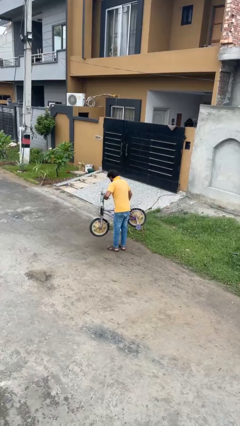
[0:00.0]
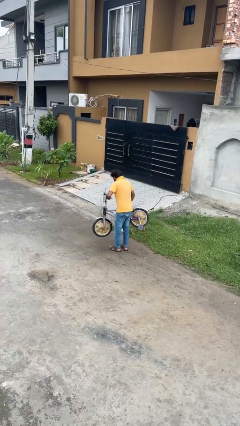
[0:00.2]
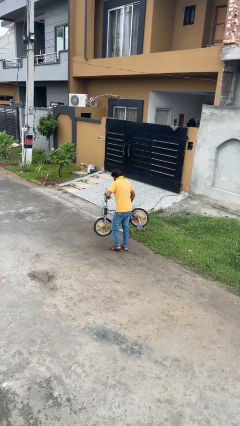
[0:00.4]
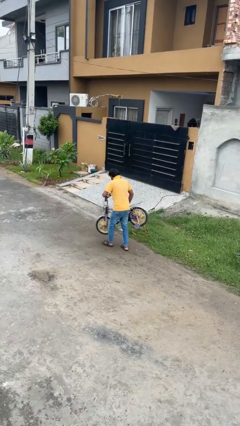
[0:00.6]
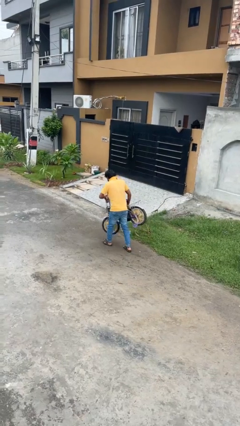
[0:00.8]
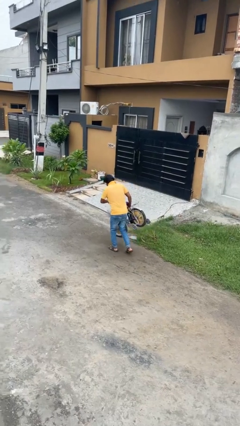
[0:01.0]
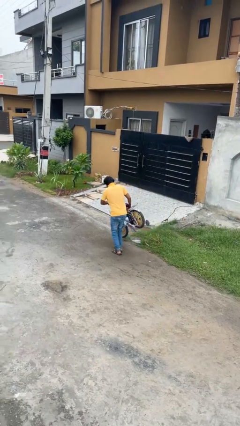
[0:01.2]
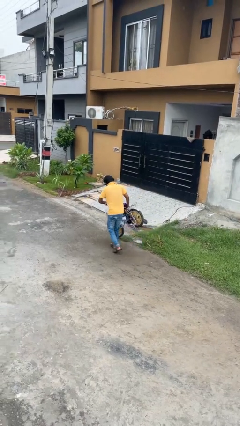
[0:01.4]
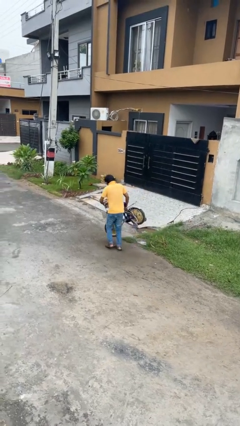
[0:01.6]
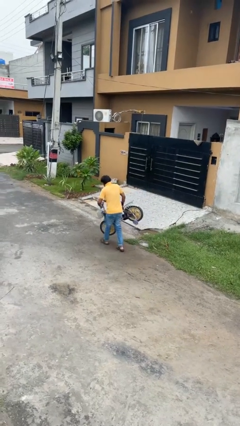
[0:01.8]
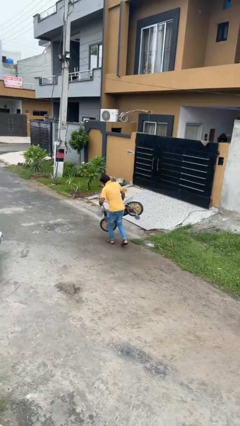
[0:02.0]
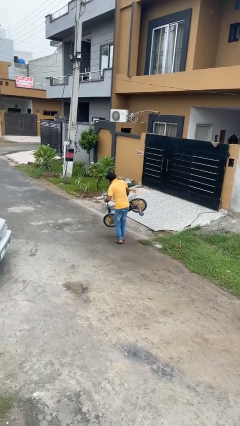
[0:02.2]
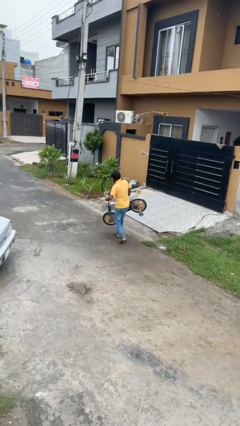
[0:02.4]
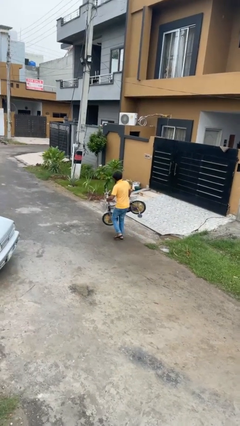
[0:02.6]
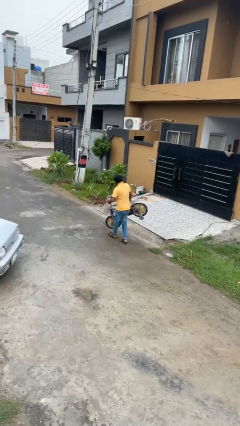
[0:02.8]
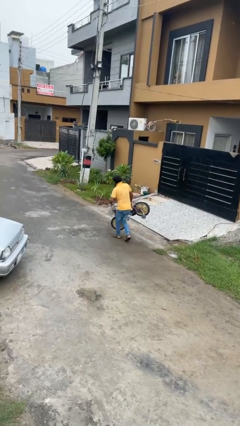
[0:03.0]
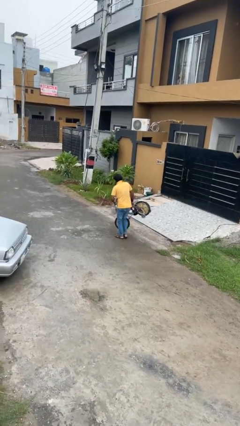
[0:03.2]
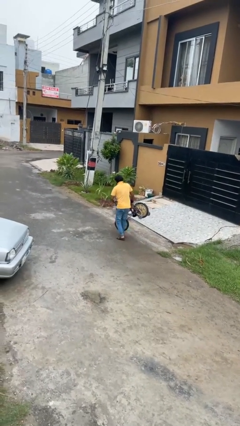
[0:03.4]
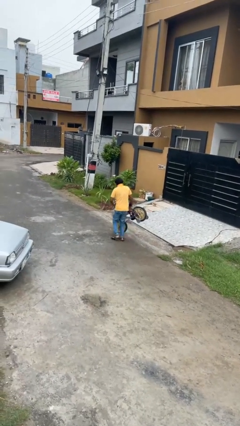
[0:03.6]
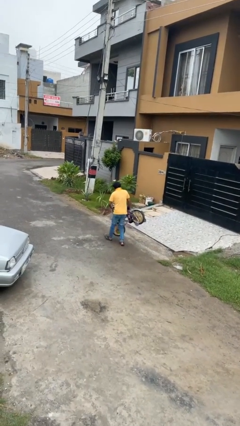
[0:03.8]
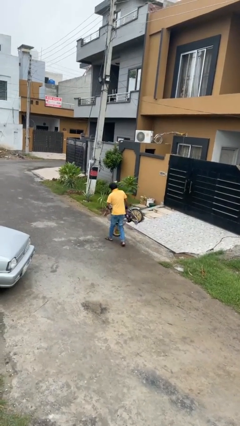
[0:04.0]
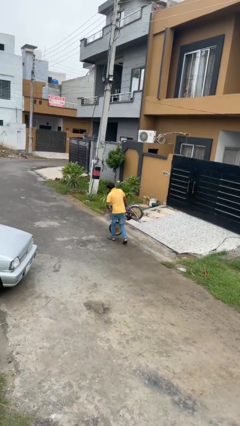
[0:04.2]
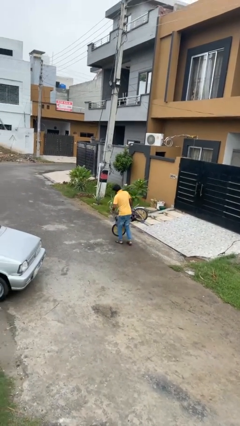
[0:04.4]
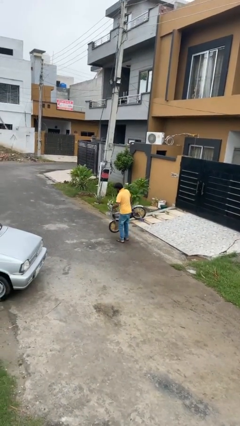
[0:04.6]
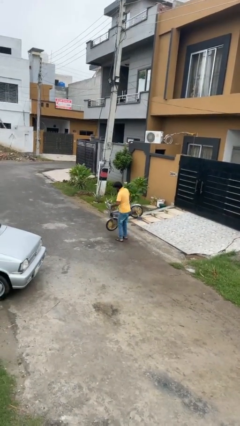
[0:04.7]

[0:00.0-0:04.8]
person carries bicycle

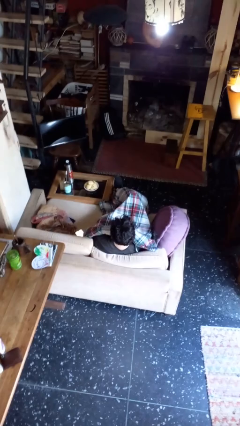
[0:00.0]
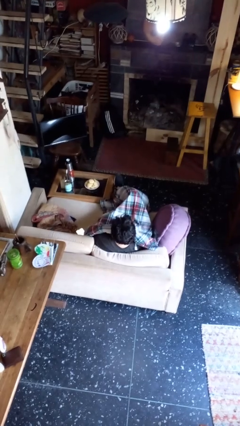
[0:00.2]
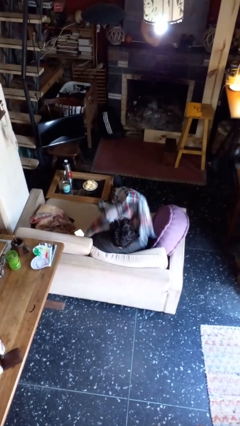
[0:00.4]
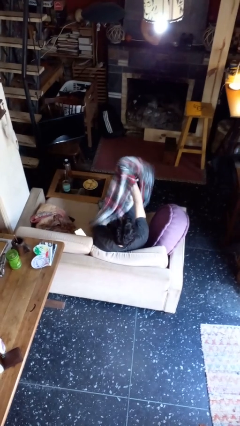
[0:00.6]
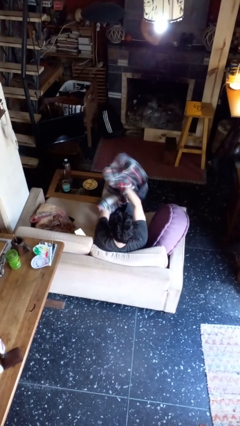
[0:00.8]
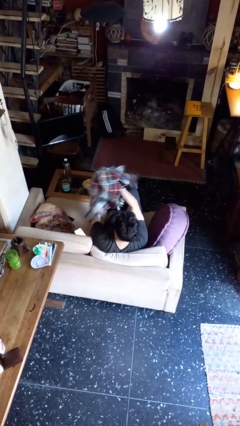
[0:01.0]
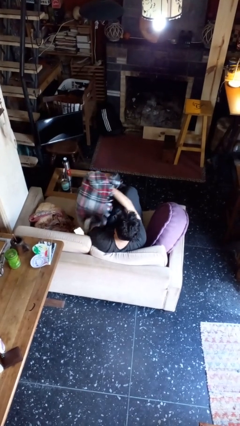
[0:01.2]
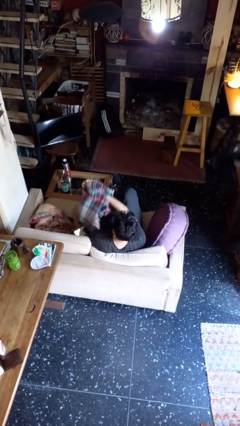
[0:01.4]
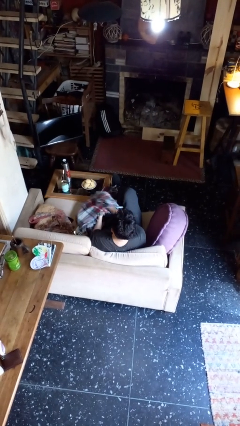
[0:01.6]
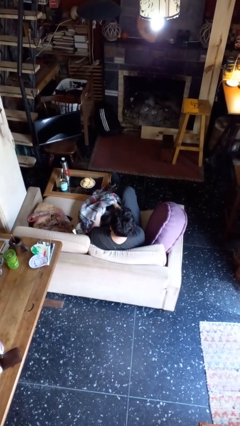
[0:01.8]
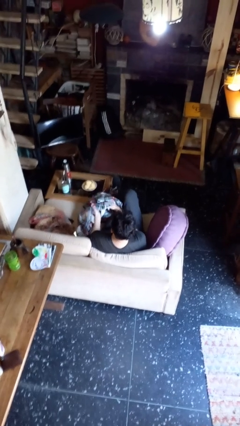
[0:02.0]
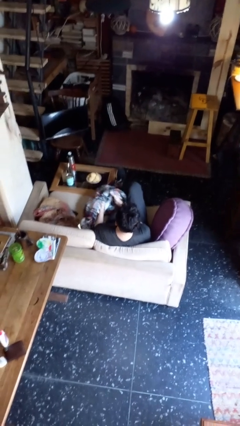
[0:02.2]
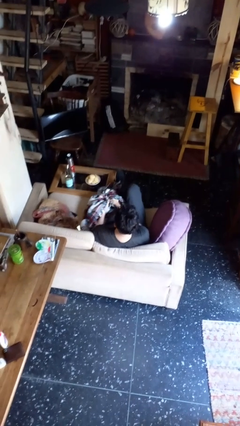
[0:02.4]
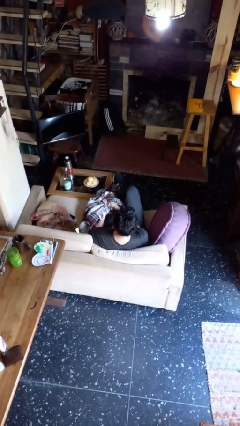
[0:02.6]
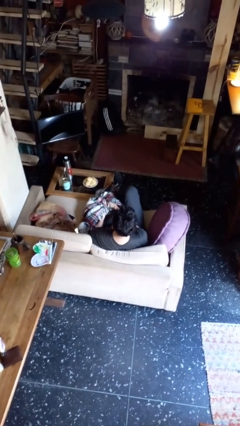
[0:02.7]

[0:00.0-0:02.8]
person uncovers with blanket

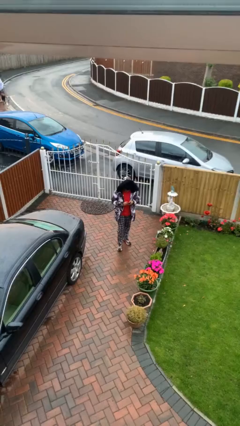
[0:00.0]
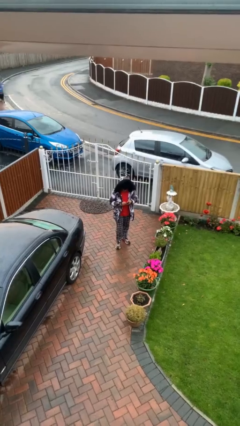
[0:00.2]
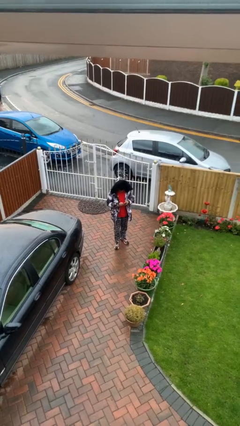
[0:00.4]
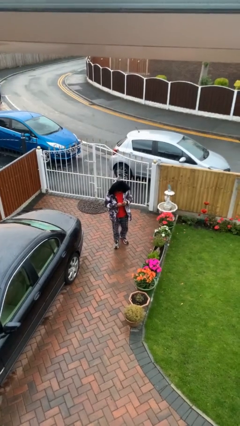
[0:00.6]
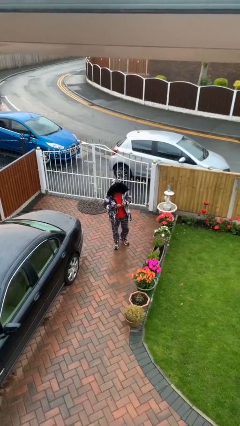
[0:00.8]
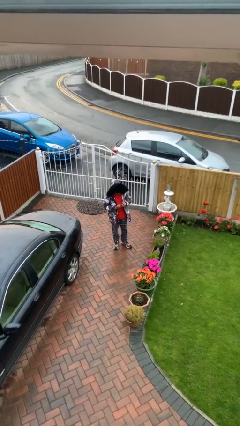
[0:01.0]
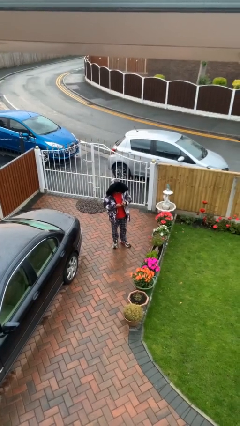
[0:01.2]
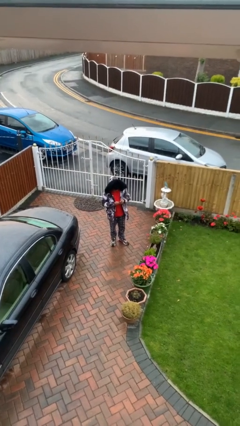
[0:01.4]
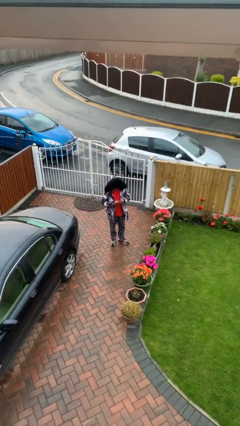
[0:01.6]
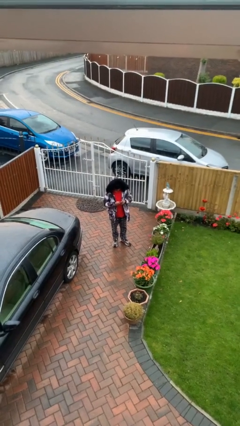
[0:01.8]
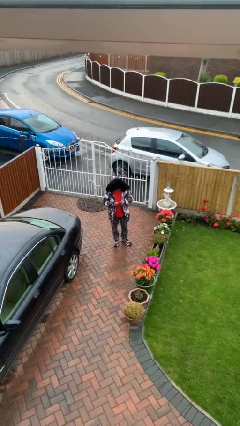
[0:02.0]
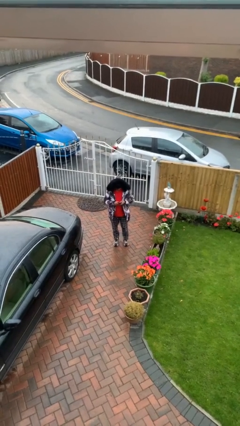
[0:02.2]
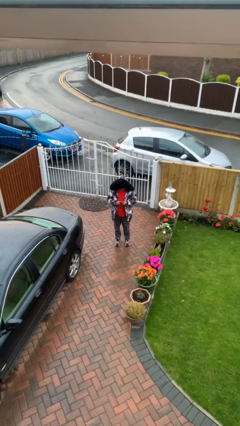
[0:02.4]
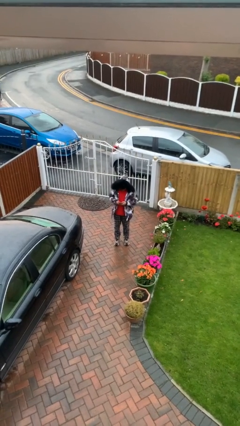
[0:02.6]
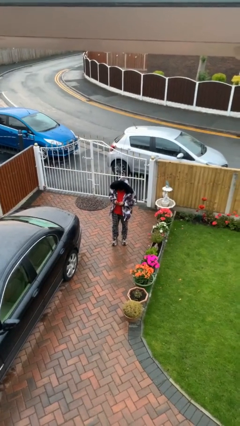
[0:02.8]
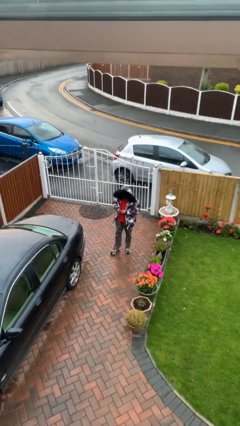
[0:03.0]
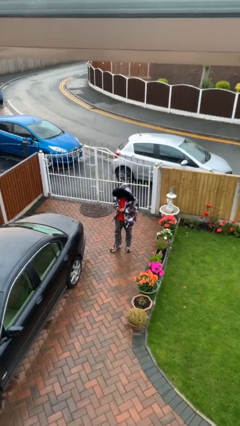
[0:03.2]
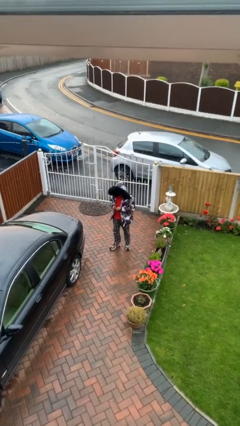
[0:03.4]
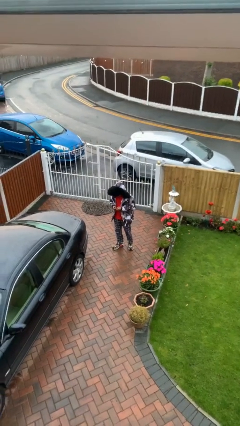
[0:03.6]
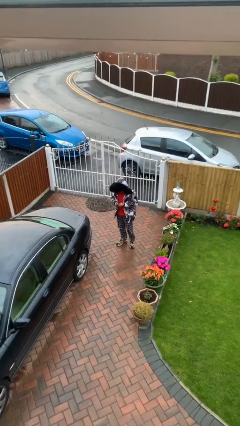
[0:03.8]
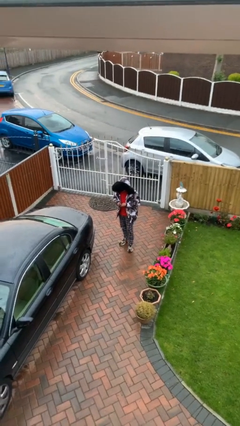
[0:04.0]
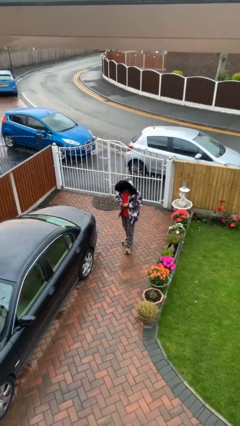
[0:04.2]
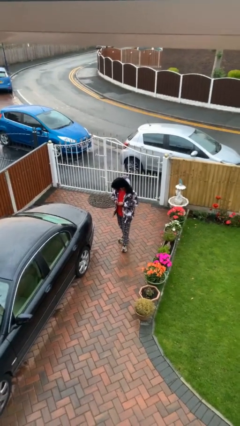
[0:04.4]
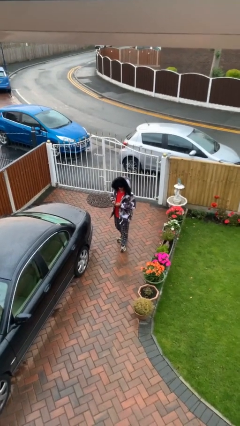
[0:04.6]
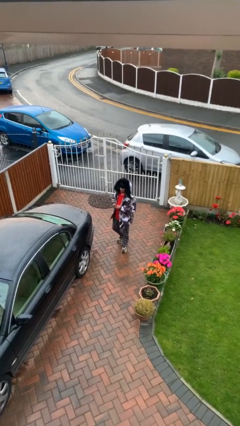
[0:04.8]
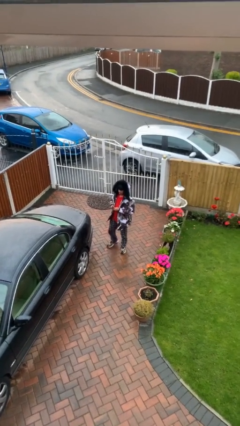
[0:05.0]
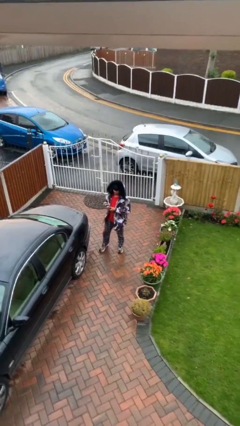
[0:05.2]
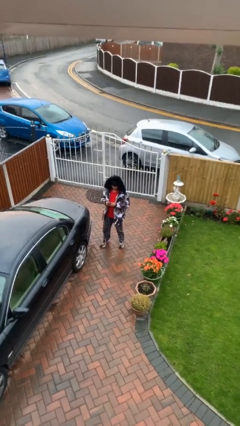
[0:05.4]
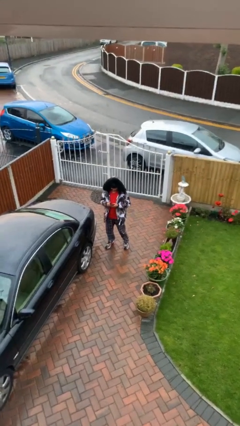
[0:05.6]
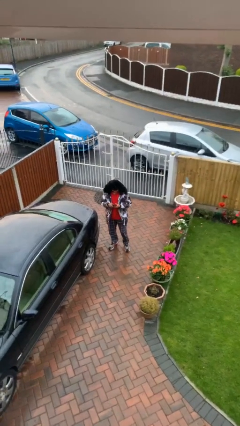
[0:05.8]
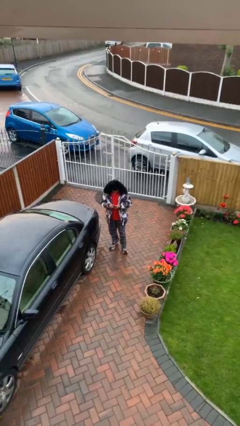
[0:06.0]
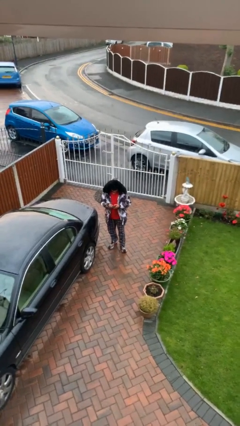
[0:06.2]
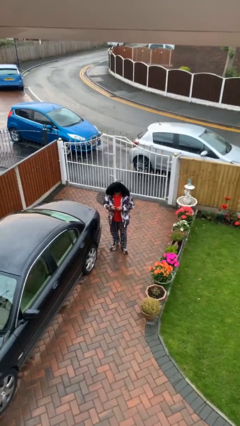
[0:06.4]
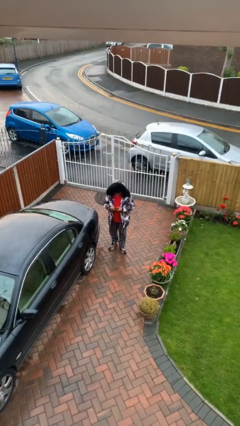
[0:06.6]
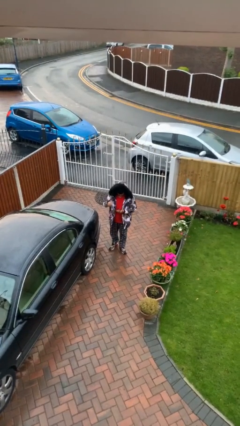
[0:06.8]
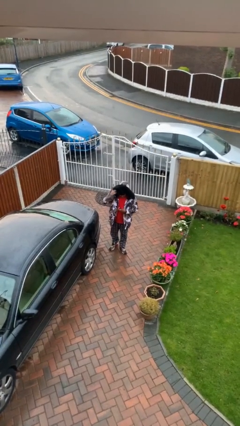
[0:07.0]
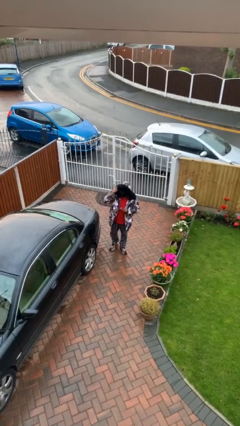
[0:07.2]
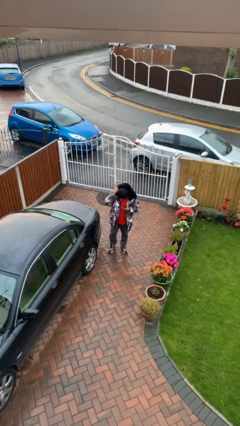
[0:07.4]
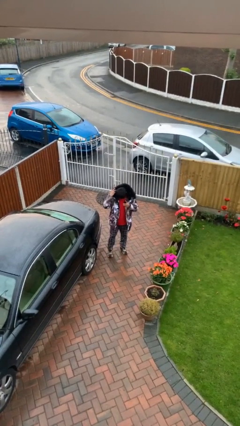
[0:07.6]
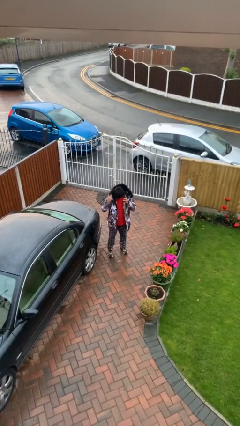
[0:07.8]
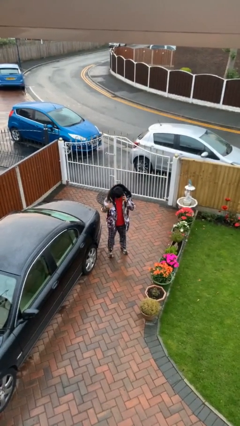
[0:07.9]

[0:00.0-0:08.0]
person texts on phone

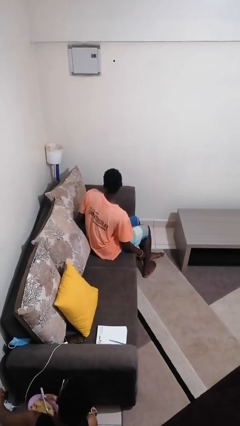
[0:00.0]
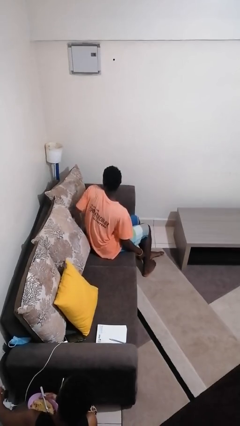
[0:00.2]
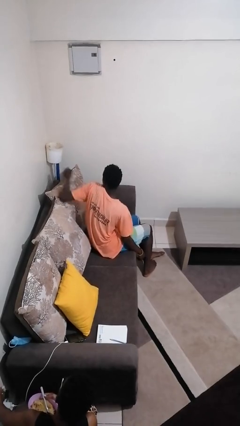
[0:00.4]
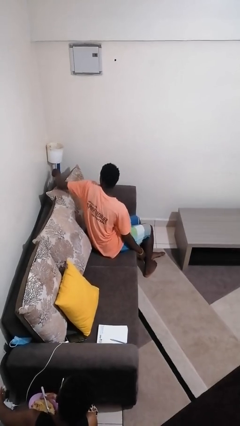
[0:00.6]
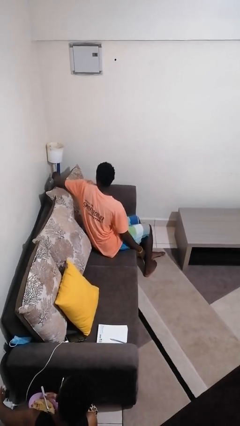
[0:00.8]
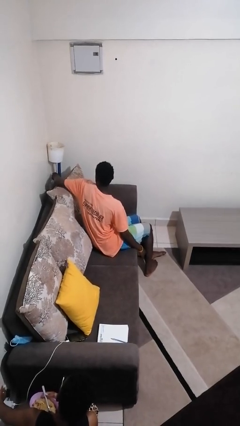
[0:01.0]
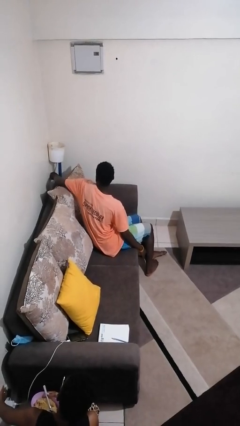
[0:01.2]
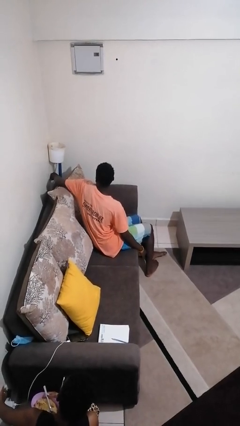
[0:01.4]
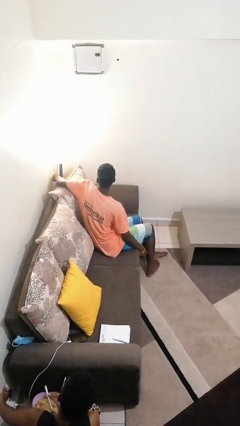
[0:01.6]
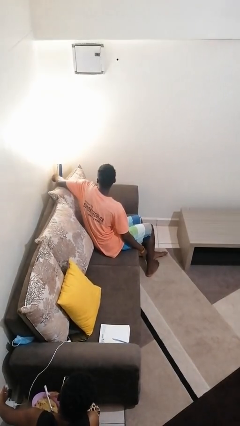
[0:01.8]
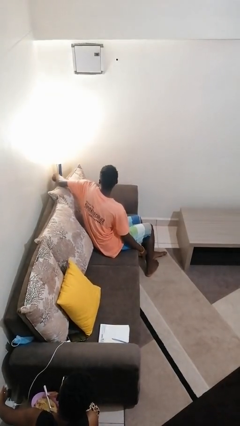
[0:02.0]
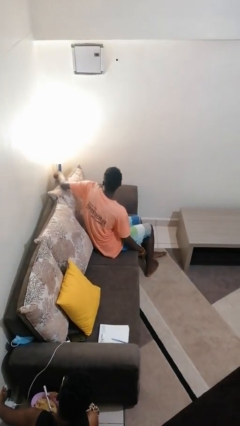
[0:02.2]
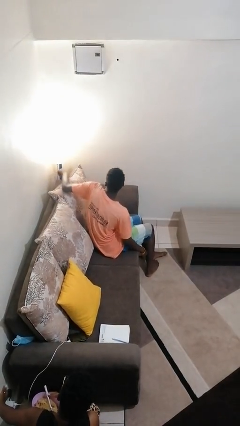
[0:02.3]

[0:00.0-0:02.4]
person turns on lamp
